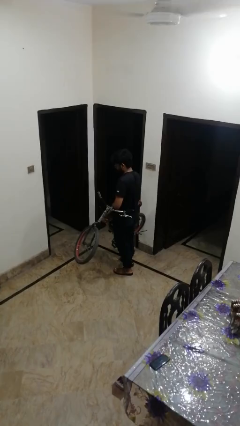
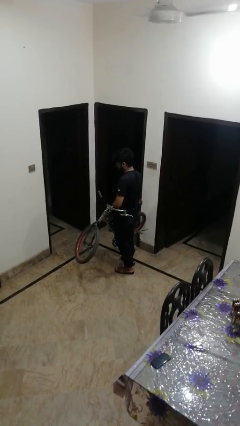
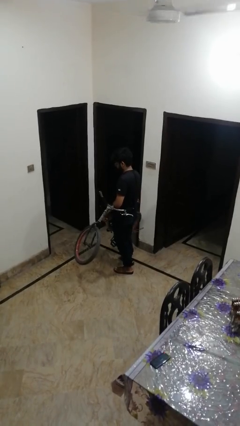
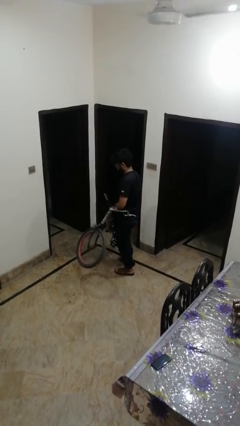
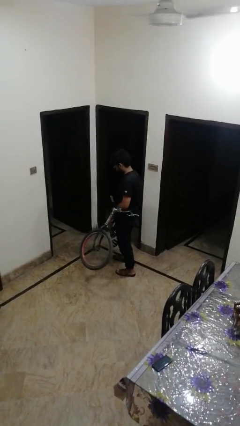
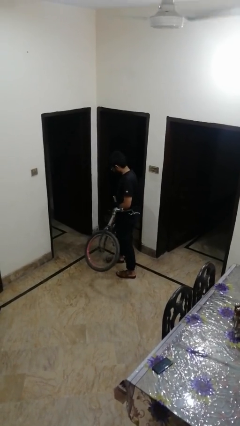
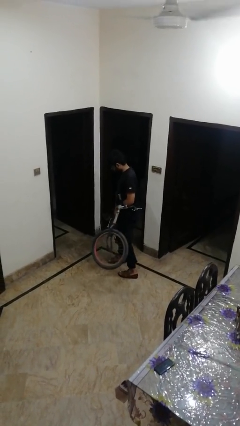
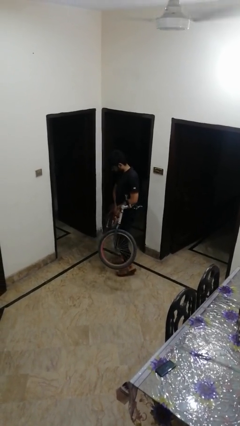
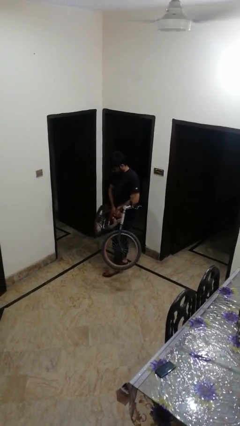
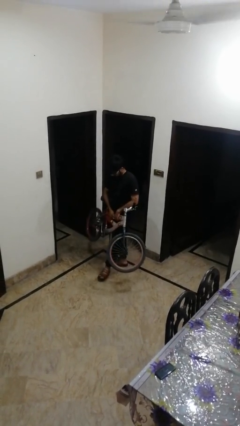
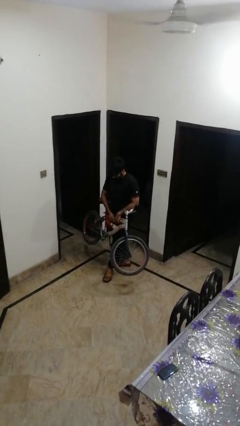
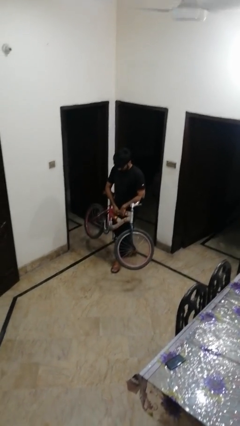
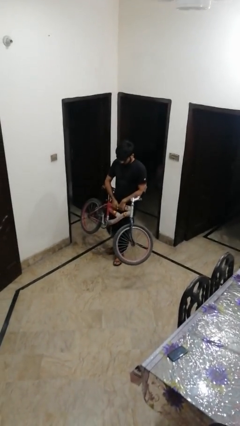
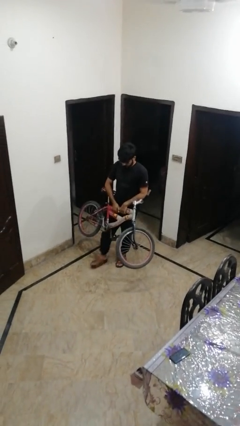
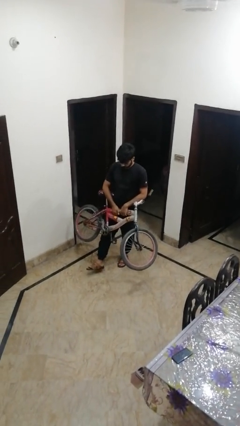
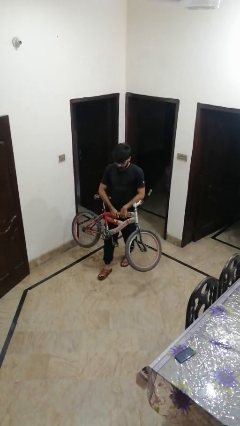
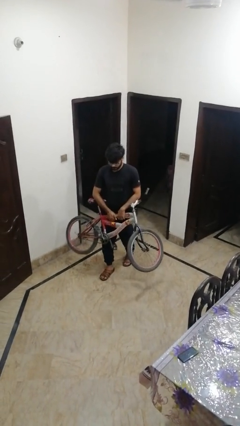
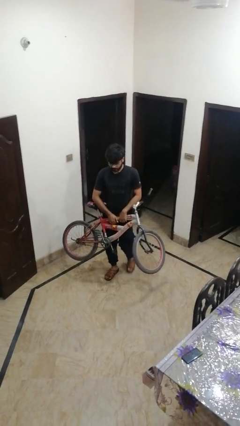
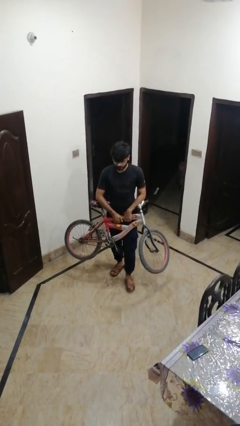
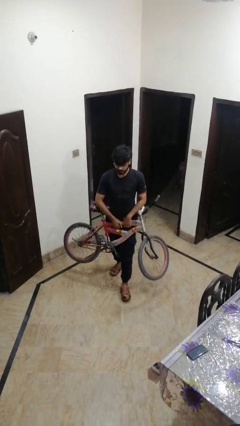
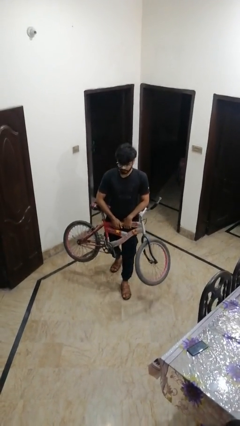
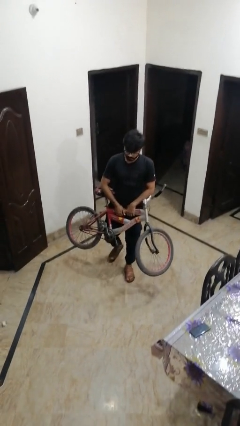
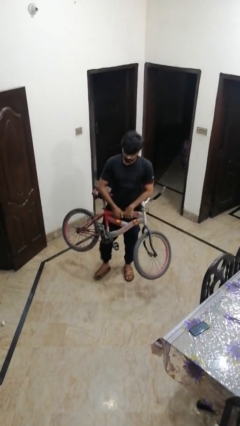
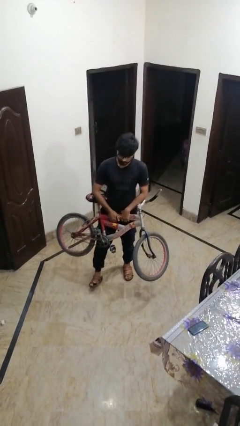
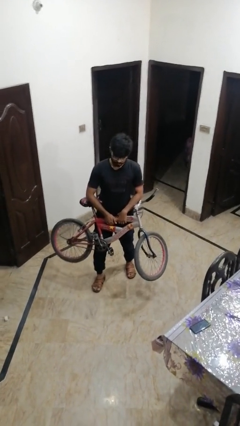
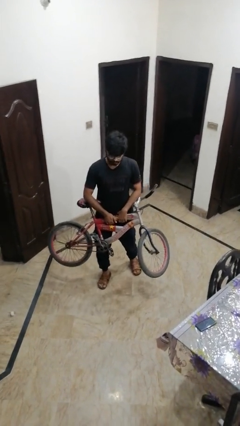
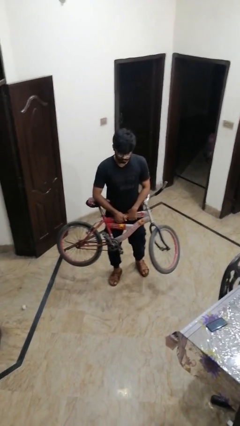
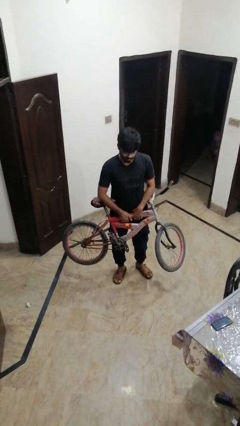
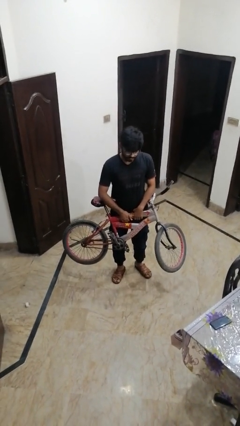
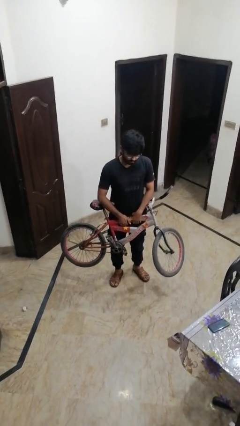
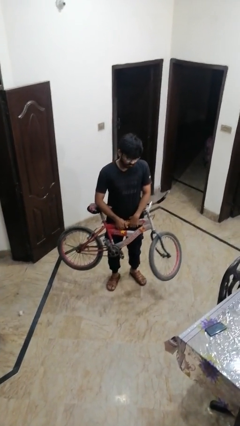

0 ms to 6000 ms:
person carries bicycle

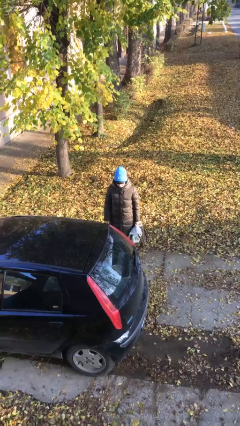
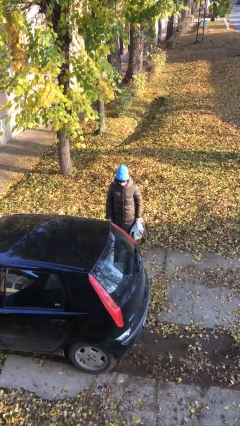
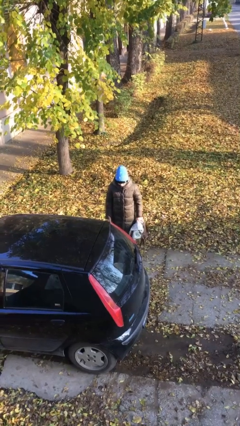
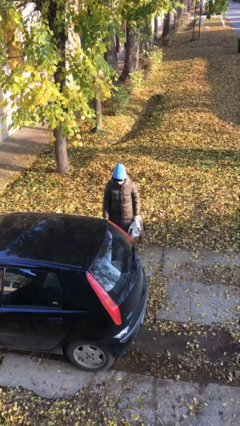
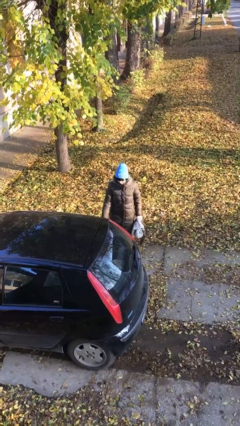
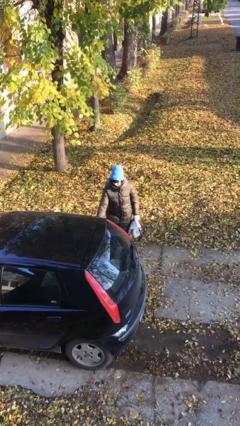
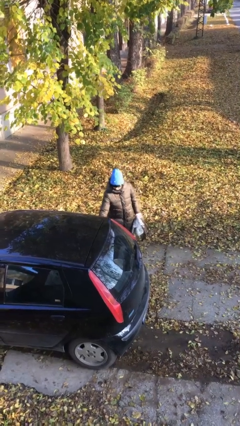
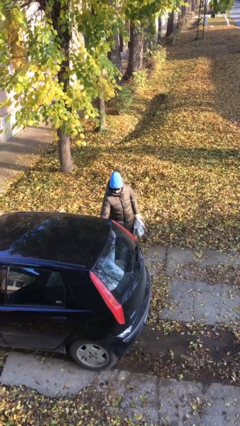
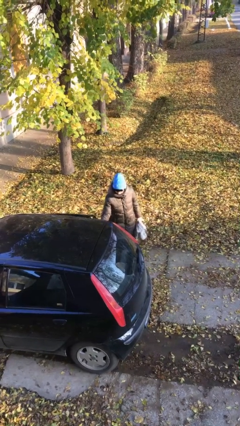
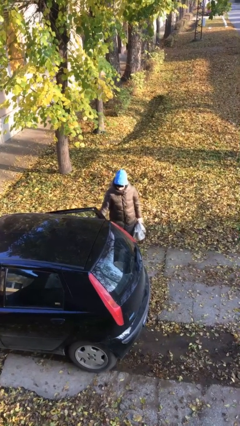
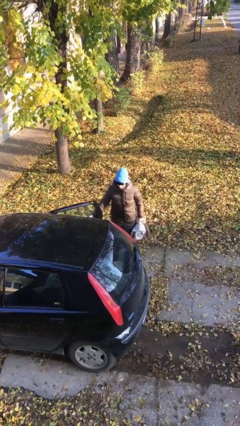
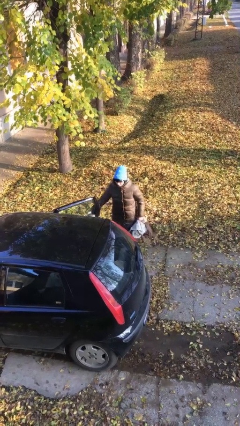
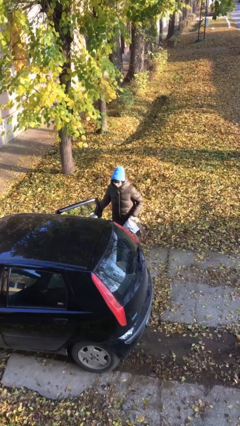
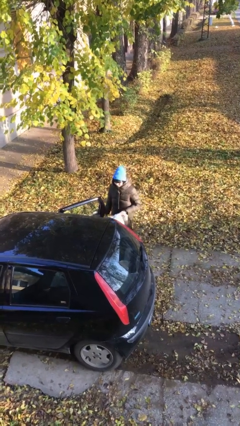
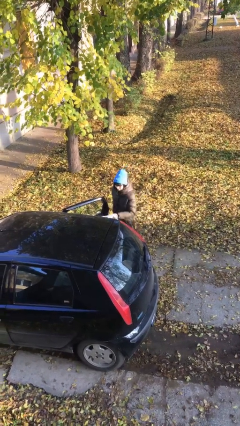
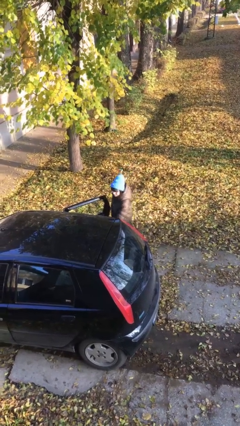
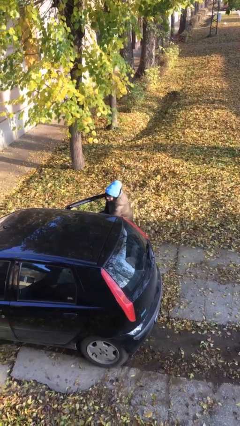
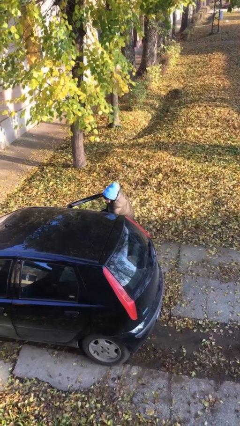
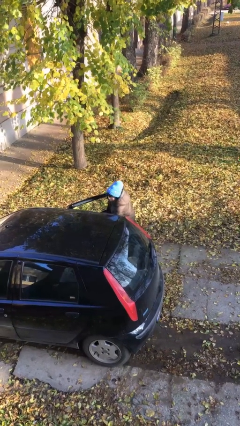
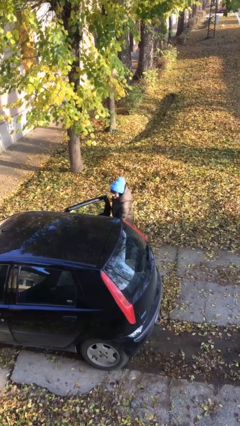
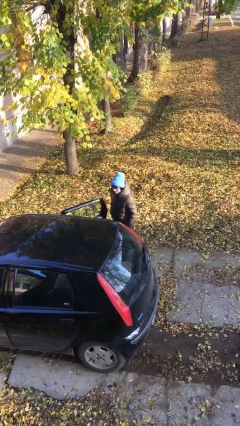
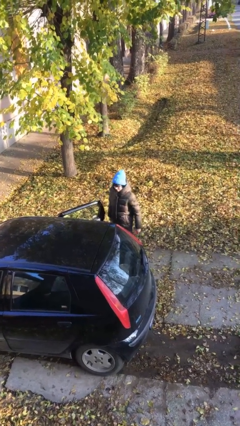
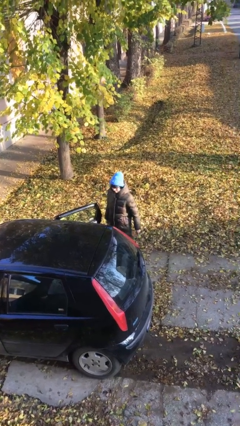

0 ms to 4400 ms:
person loads car

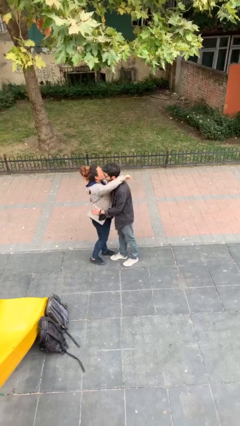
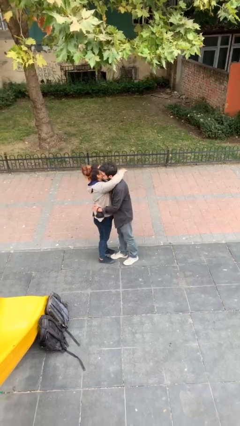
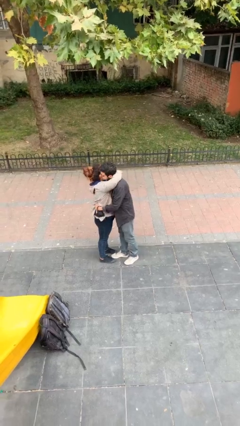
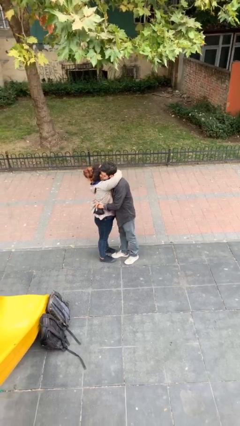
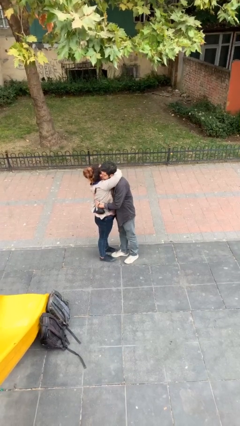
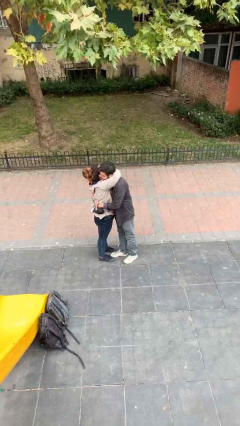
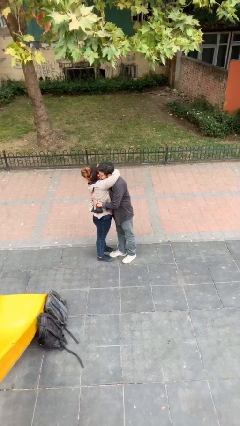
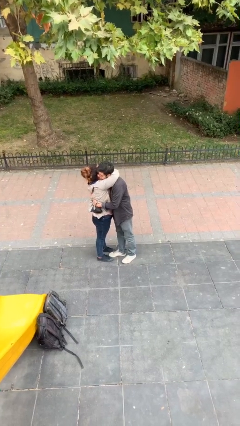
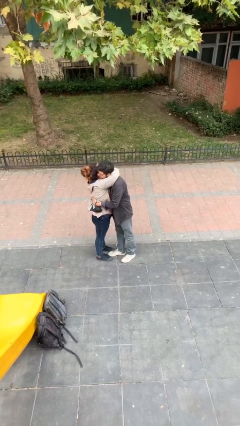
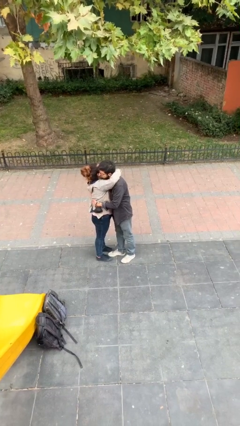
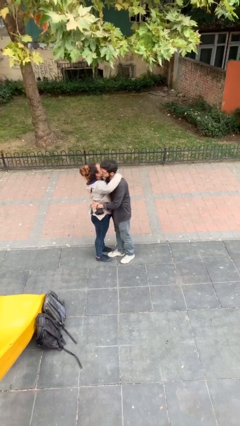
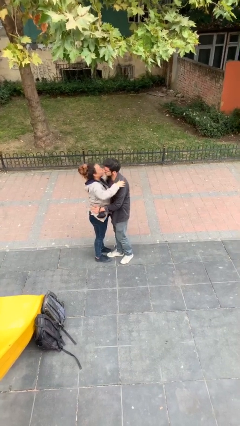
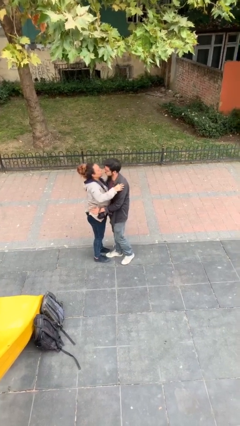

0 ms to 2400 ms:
person embraces person

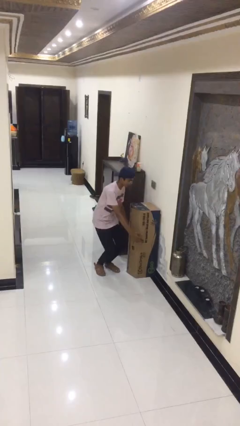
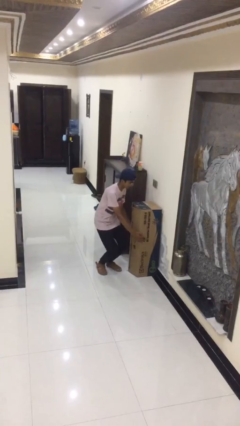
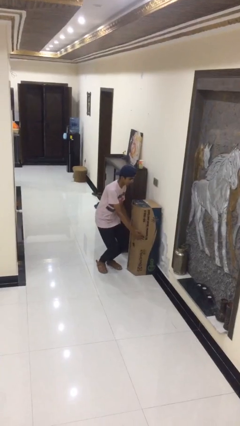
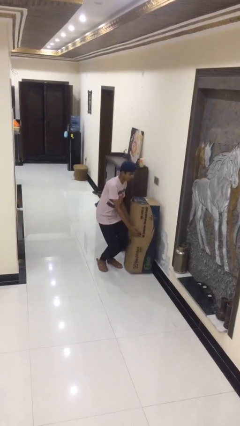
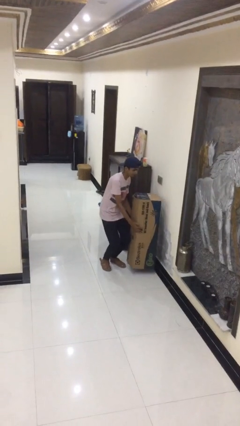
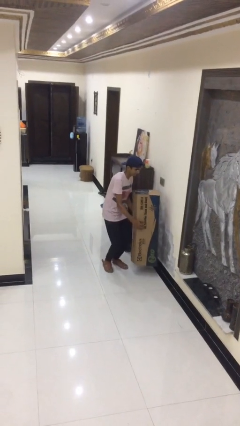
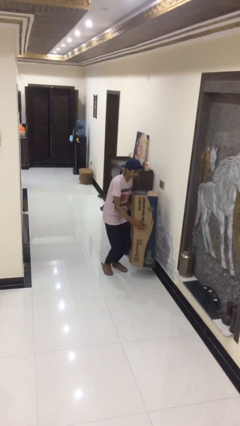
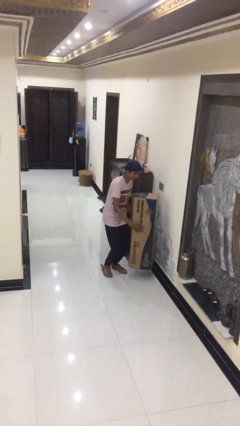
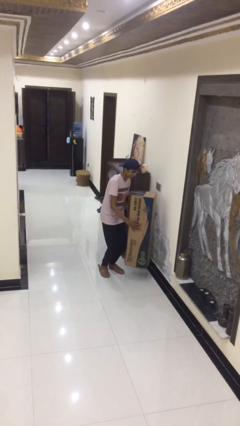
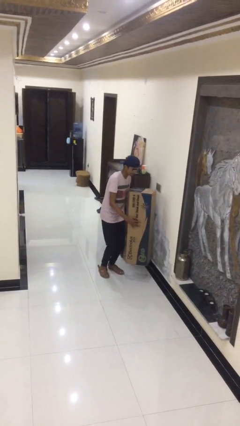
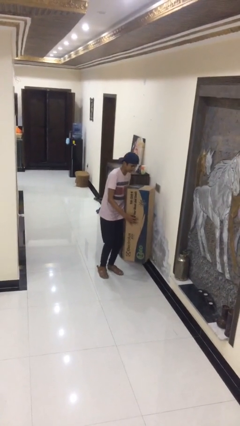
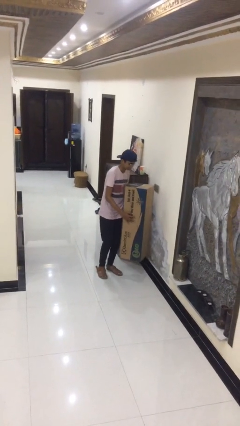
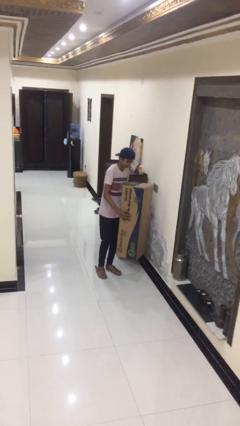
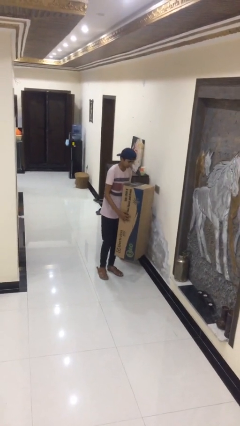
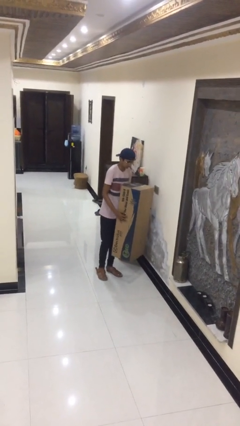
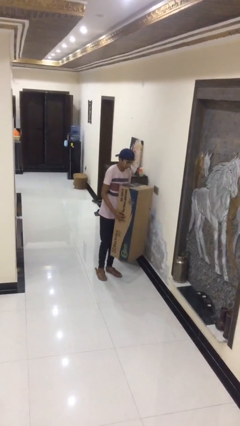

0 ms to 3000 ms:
person picks up object from floor

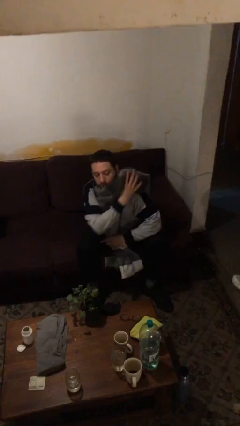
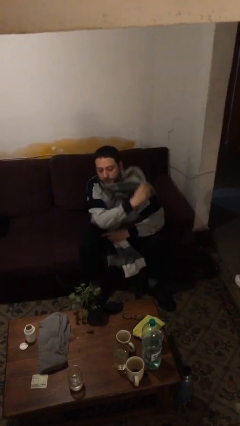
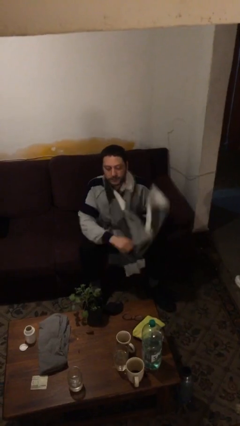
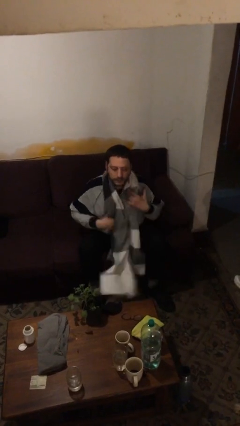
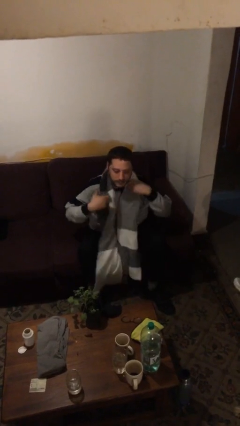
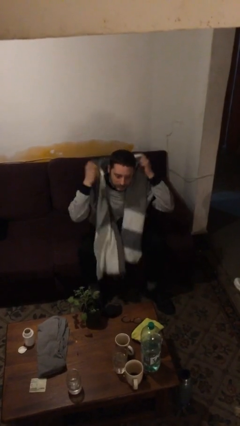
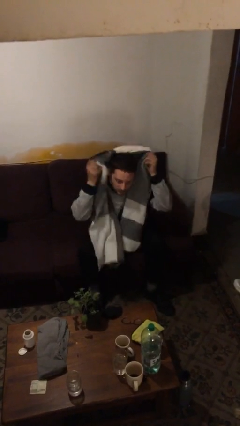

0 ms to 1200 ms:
person takes off scarf

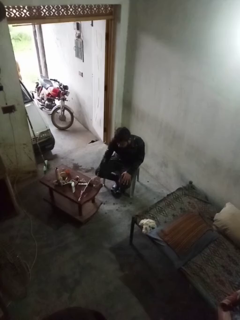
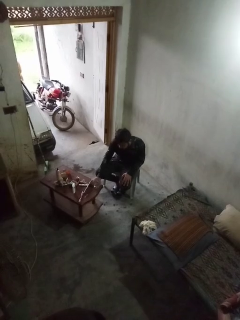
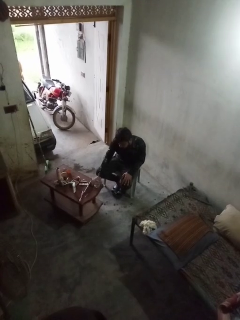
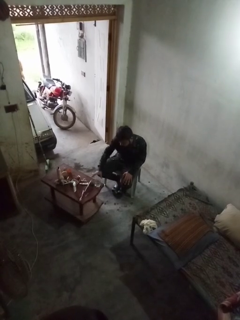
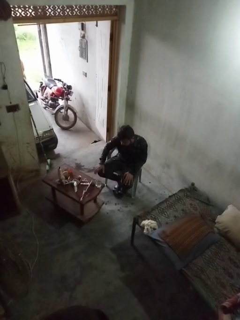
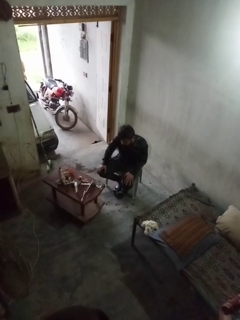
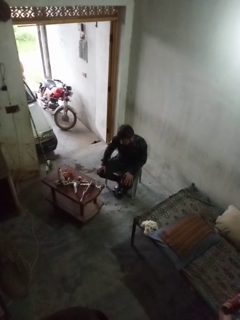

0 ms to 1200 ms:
person puts down object on table
